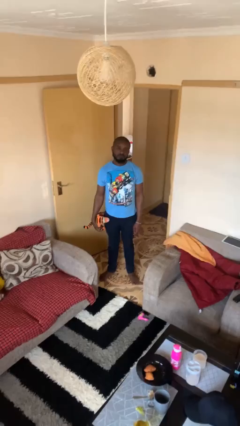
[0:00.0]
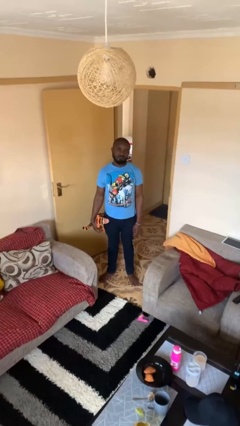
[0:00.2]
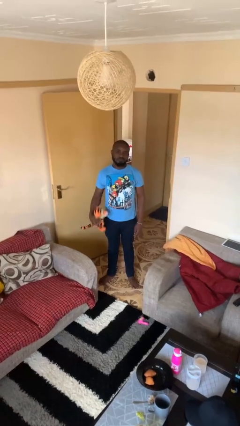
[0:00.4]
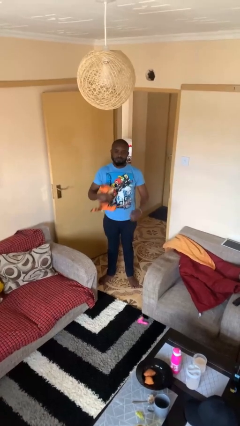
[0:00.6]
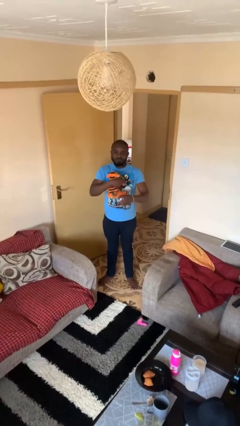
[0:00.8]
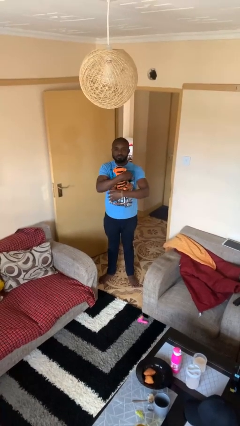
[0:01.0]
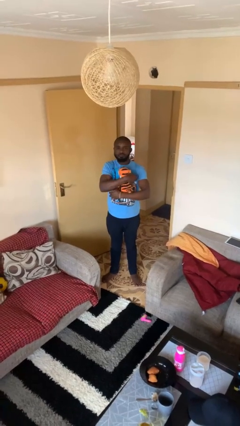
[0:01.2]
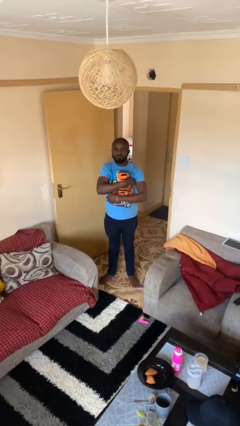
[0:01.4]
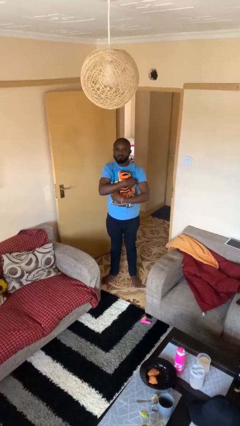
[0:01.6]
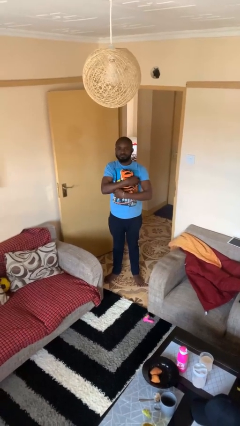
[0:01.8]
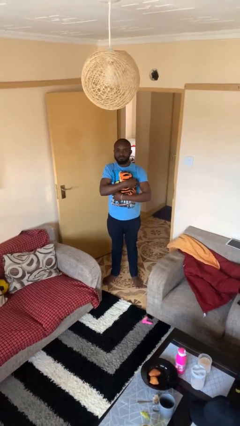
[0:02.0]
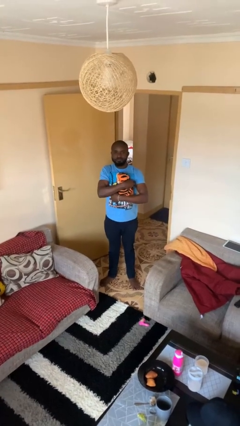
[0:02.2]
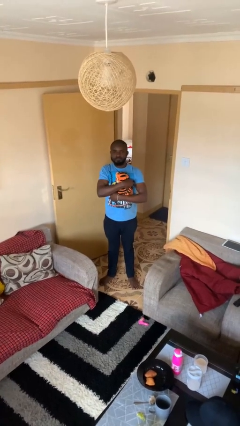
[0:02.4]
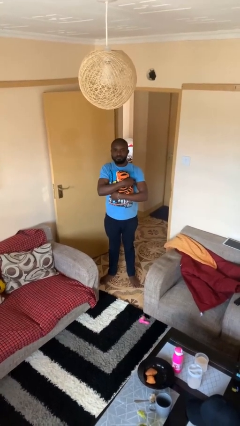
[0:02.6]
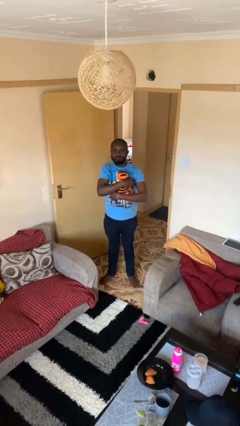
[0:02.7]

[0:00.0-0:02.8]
person hugs stuffed animal

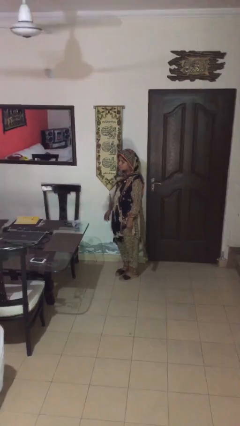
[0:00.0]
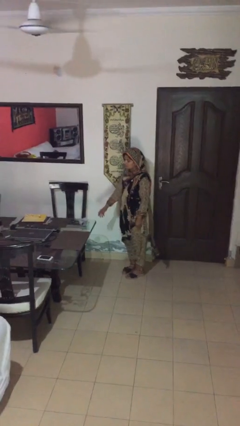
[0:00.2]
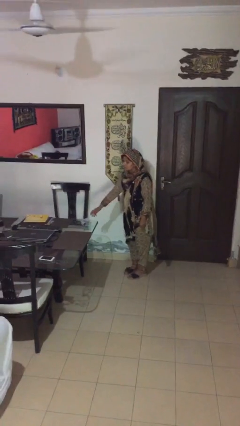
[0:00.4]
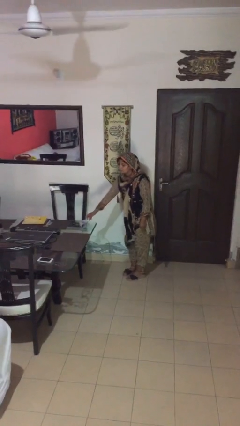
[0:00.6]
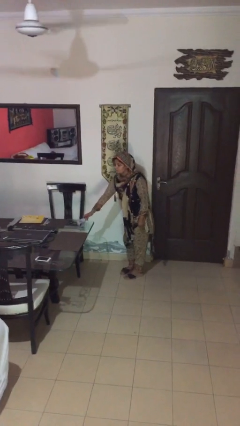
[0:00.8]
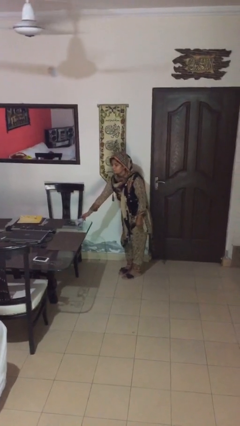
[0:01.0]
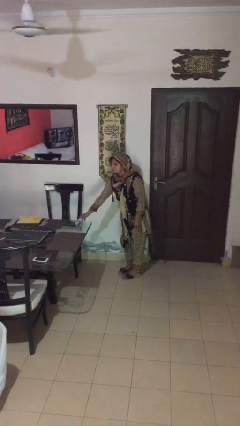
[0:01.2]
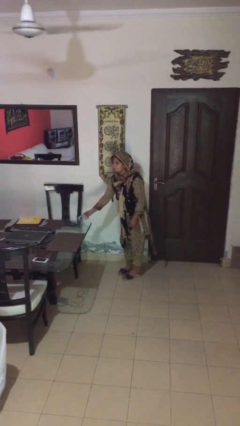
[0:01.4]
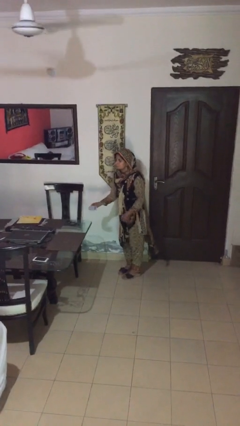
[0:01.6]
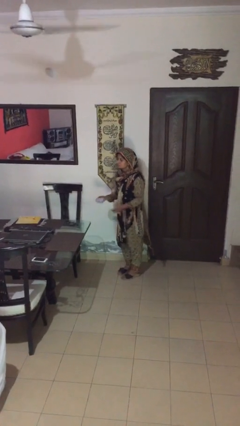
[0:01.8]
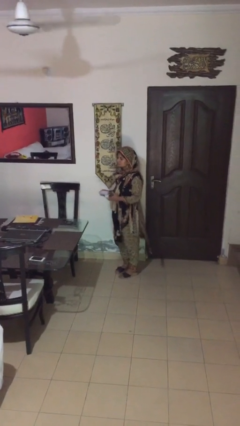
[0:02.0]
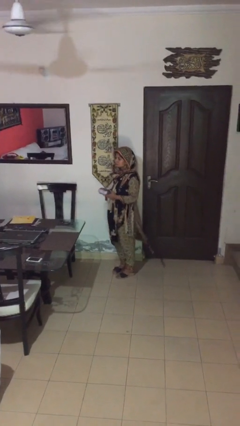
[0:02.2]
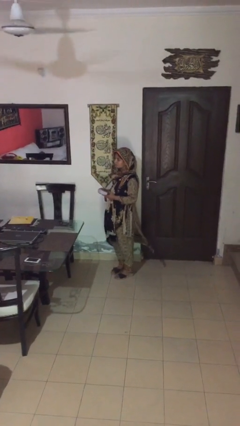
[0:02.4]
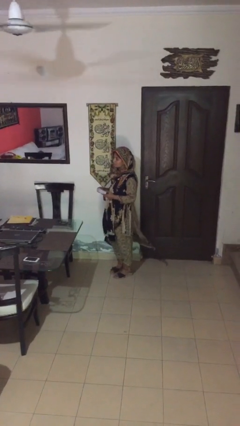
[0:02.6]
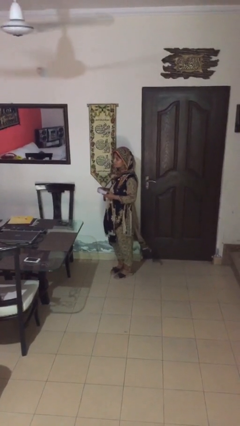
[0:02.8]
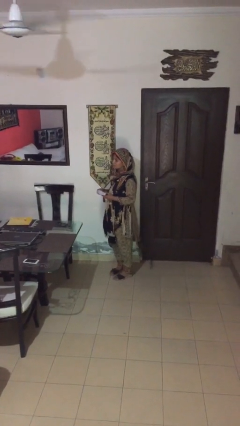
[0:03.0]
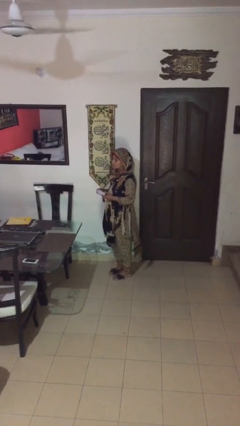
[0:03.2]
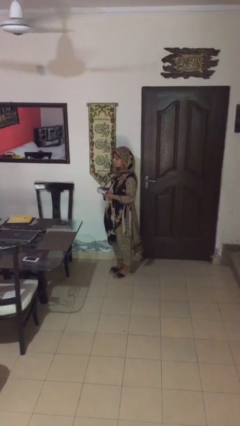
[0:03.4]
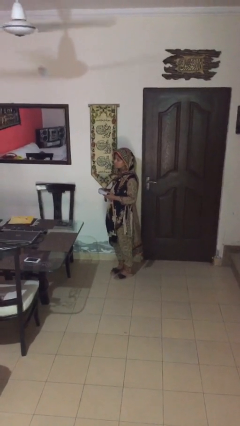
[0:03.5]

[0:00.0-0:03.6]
person picks up object from table

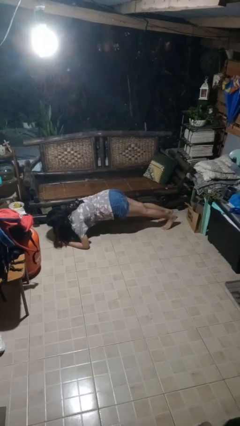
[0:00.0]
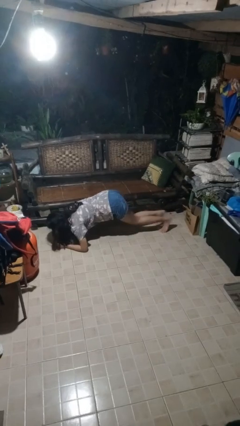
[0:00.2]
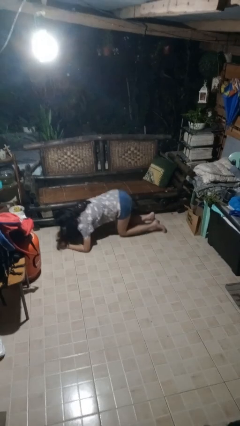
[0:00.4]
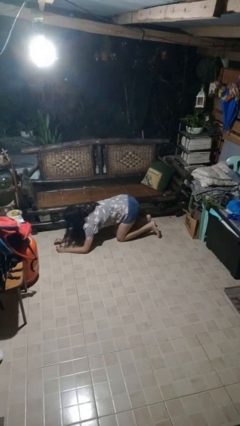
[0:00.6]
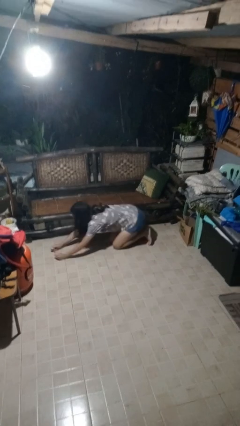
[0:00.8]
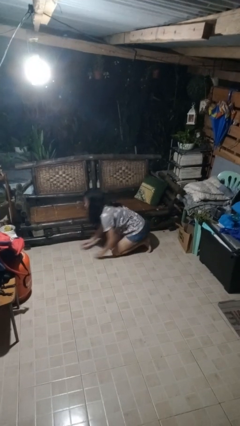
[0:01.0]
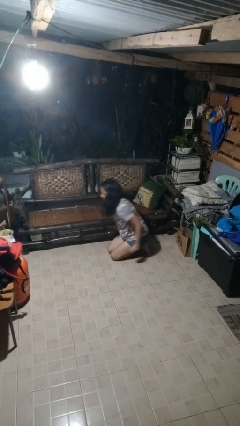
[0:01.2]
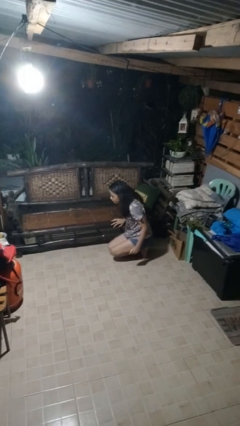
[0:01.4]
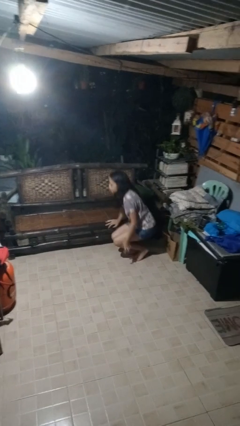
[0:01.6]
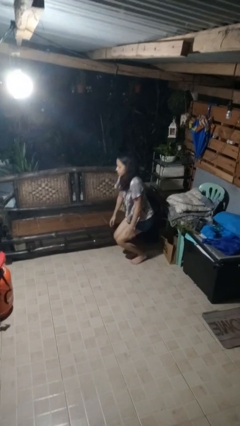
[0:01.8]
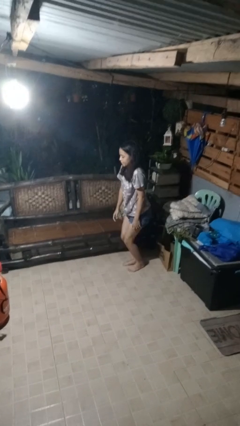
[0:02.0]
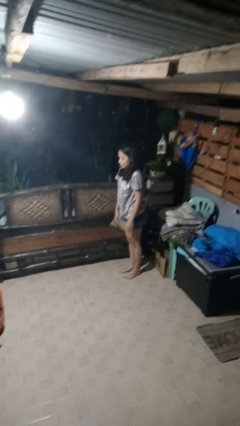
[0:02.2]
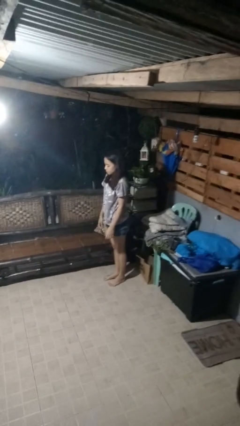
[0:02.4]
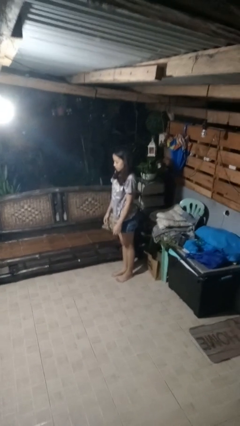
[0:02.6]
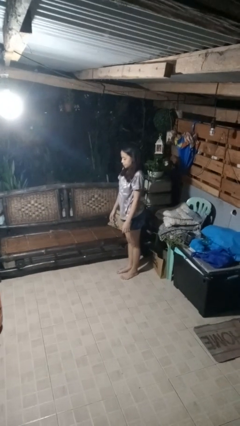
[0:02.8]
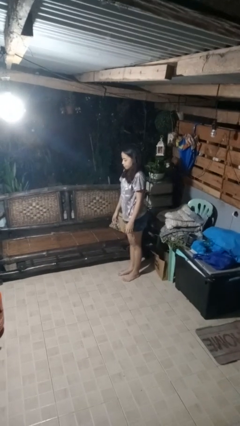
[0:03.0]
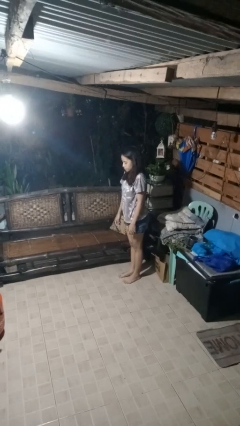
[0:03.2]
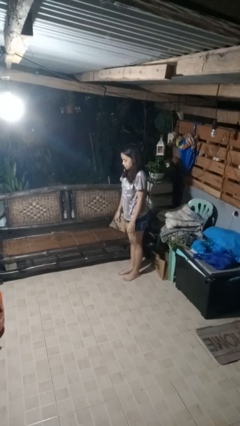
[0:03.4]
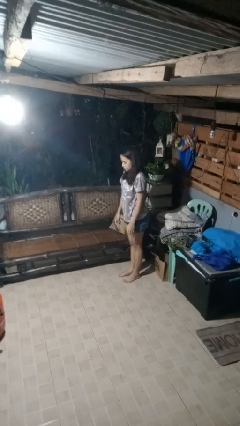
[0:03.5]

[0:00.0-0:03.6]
person stands up from floor

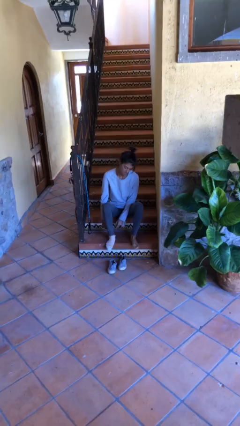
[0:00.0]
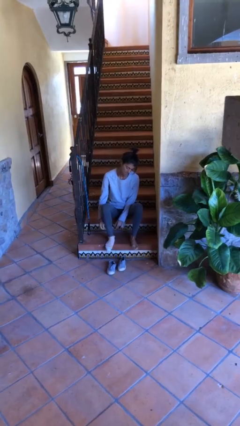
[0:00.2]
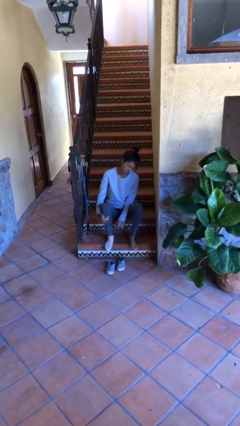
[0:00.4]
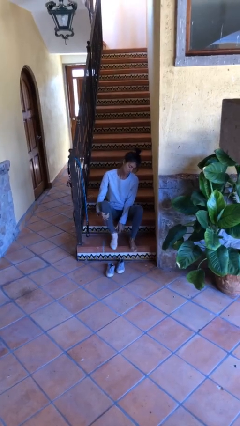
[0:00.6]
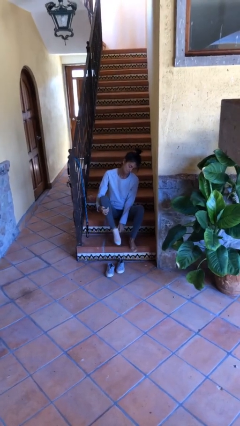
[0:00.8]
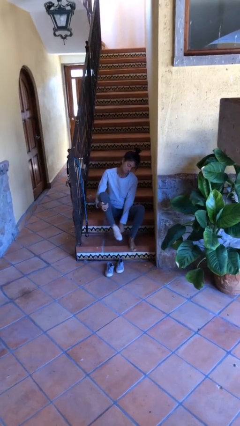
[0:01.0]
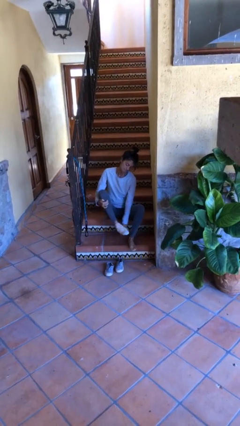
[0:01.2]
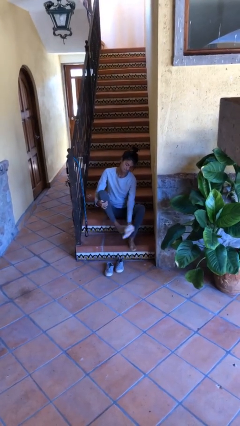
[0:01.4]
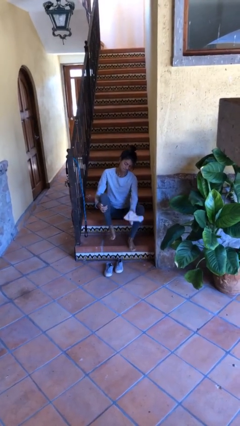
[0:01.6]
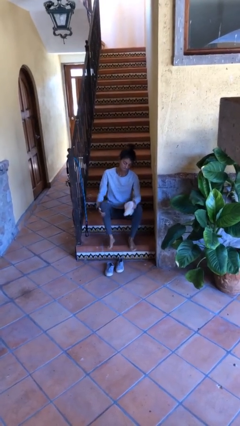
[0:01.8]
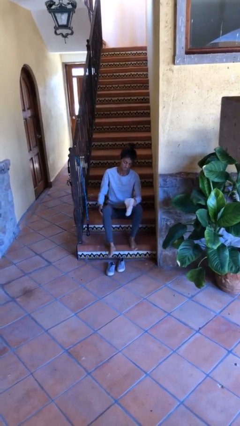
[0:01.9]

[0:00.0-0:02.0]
person takes off socks

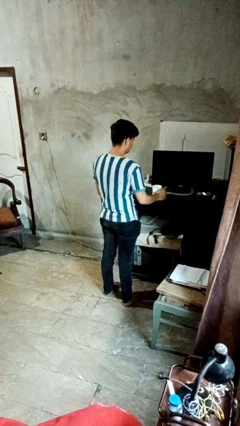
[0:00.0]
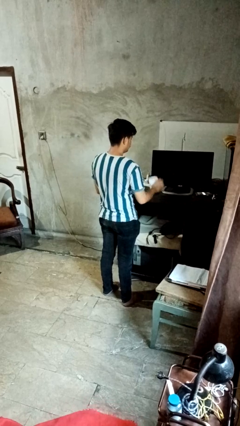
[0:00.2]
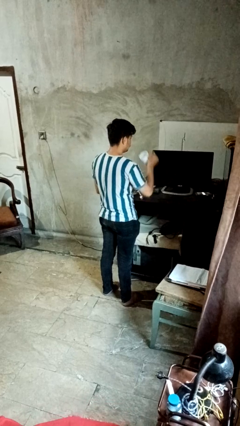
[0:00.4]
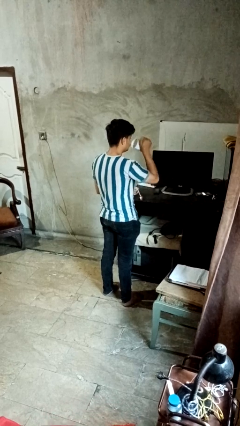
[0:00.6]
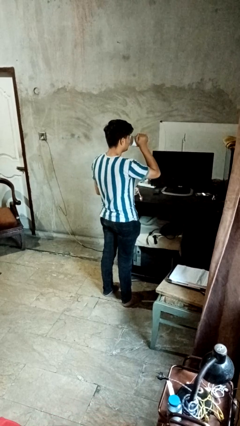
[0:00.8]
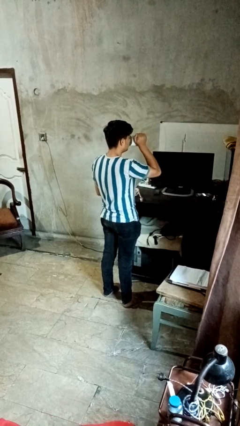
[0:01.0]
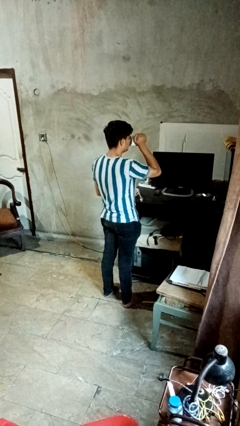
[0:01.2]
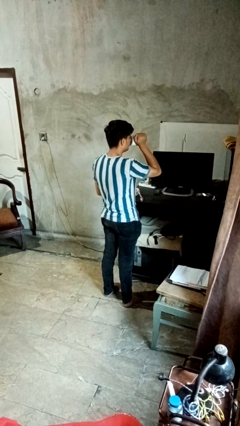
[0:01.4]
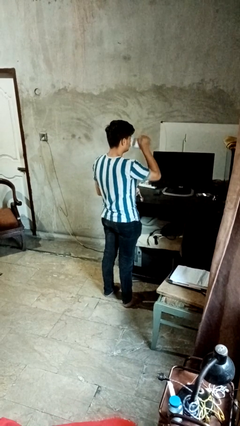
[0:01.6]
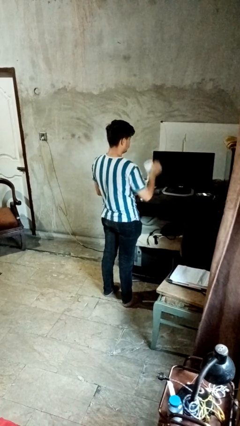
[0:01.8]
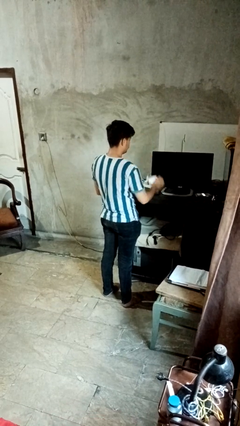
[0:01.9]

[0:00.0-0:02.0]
person drinks from mug

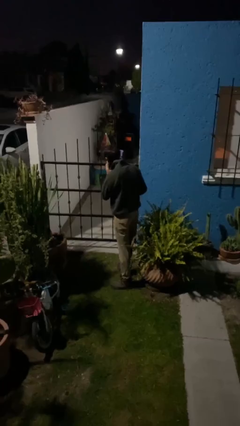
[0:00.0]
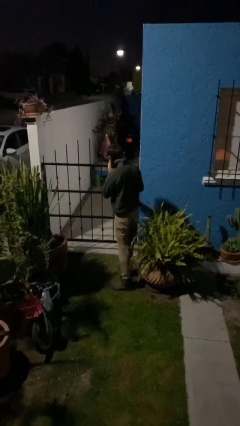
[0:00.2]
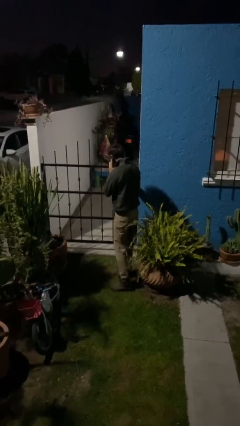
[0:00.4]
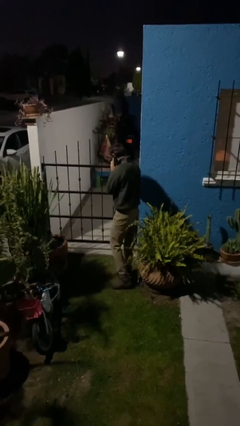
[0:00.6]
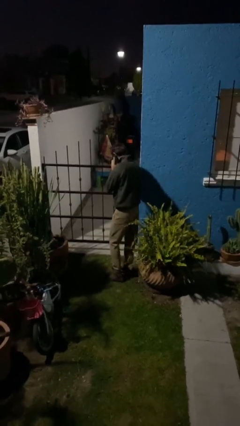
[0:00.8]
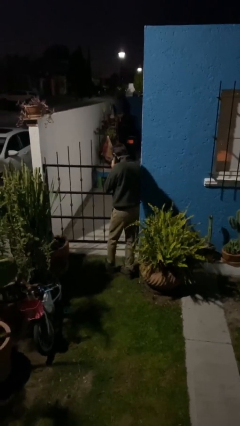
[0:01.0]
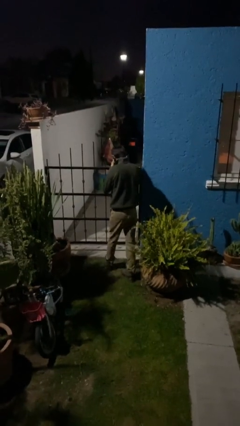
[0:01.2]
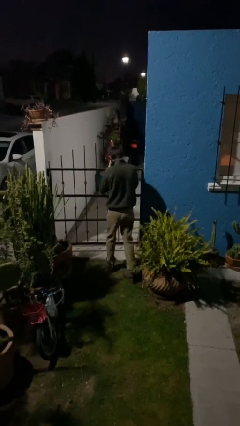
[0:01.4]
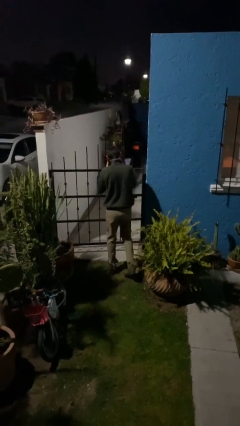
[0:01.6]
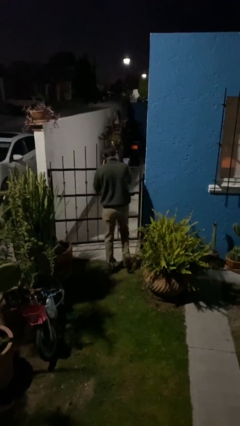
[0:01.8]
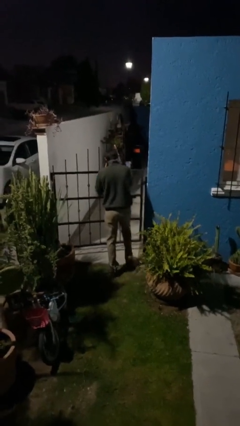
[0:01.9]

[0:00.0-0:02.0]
person opens facility door

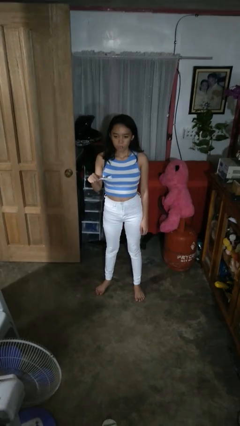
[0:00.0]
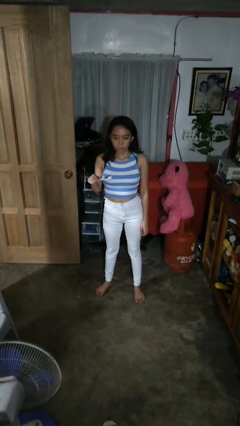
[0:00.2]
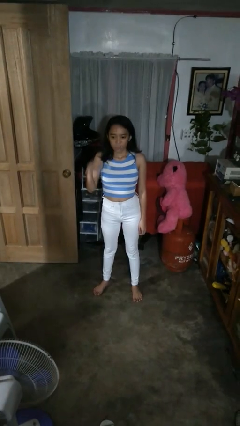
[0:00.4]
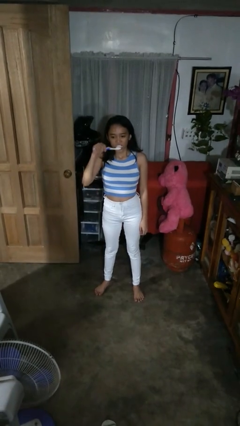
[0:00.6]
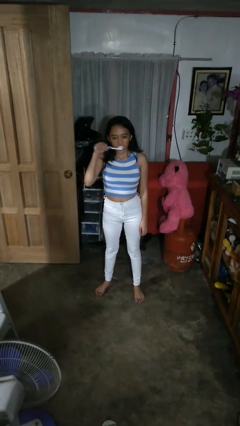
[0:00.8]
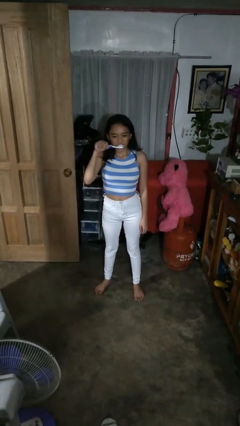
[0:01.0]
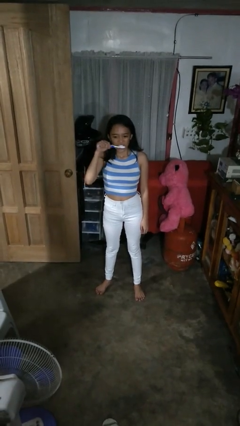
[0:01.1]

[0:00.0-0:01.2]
person brushes teeth

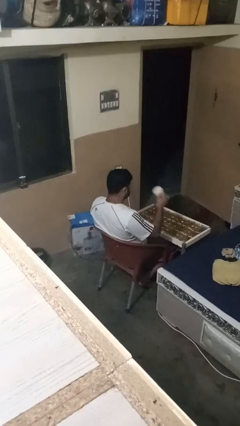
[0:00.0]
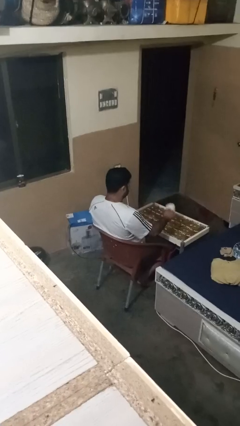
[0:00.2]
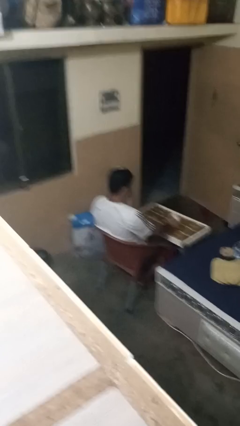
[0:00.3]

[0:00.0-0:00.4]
person puts down object on table
